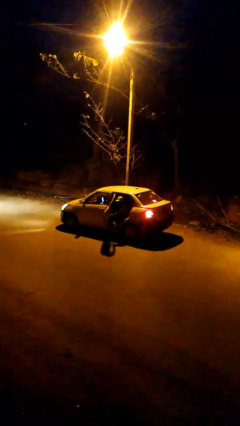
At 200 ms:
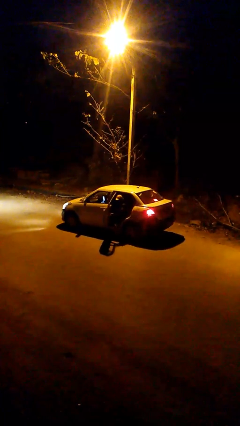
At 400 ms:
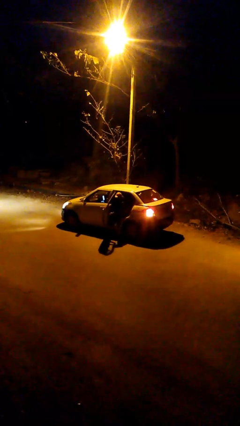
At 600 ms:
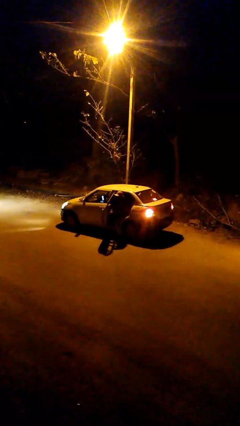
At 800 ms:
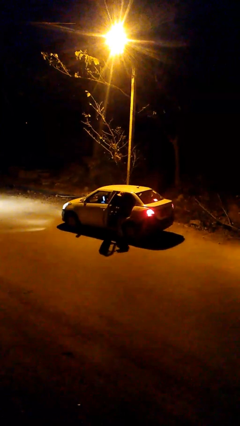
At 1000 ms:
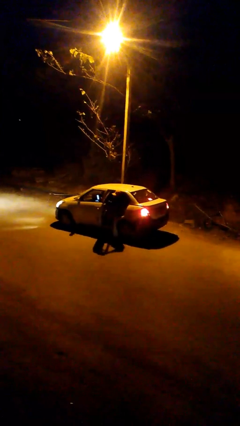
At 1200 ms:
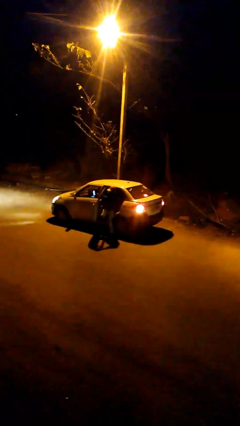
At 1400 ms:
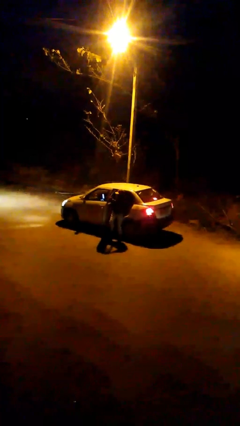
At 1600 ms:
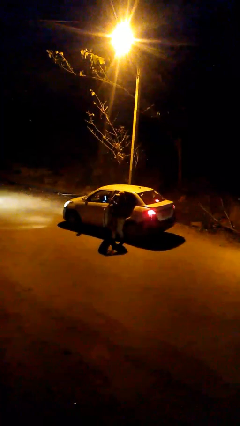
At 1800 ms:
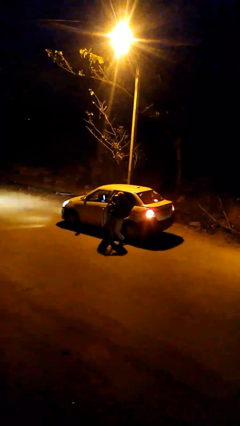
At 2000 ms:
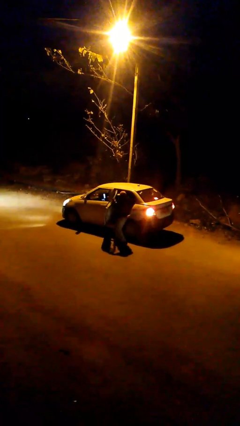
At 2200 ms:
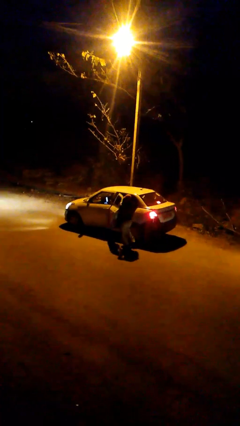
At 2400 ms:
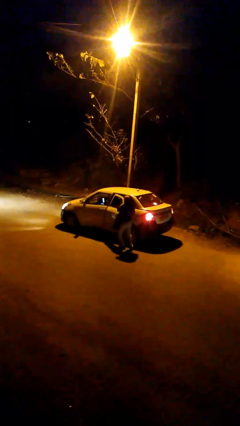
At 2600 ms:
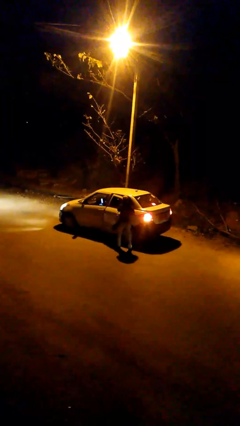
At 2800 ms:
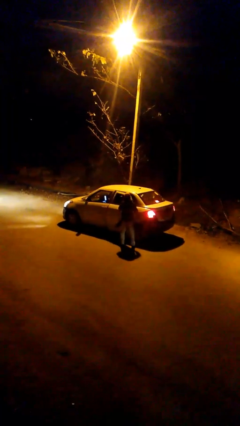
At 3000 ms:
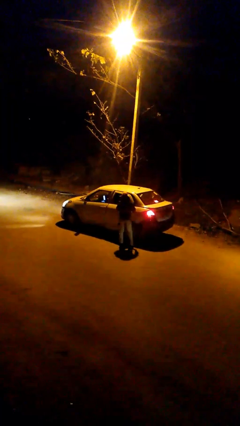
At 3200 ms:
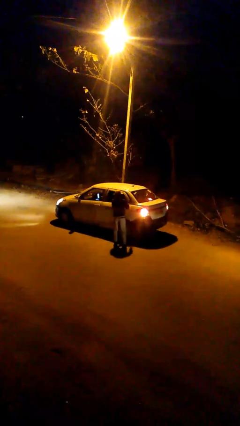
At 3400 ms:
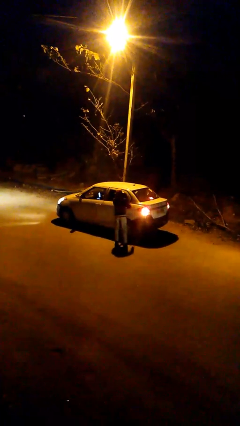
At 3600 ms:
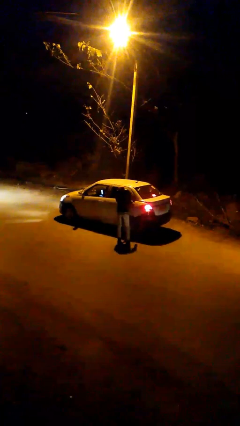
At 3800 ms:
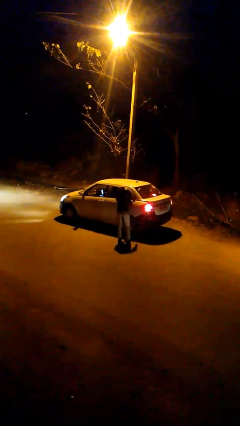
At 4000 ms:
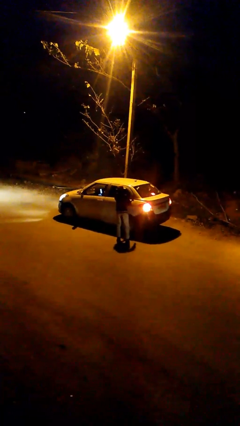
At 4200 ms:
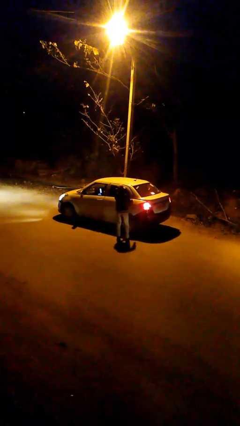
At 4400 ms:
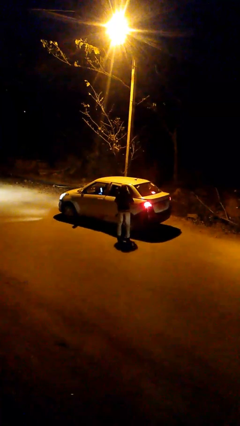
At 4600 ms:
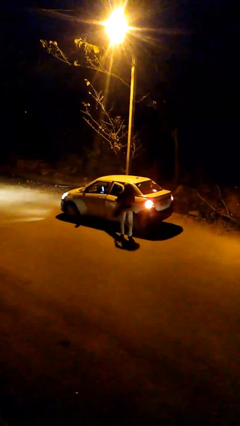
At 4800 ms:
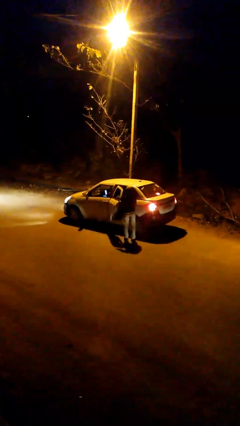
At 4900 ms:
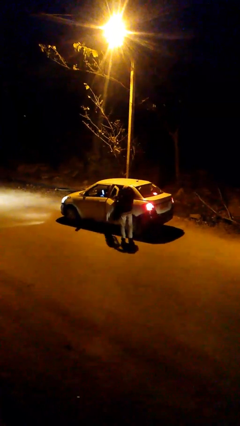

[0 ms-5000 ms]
car drops off person

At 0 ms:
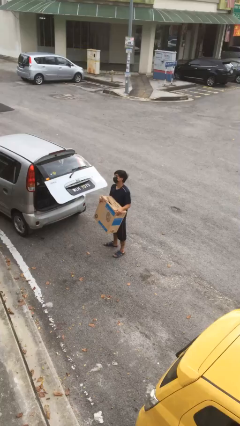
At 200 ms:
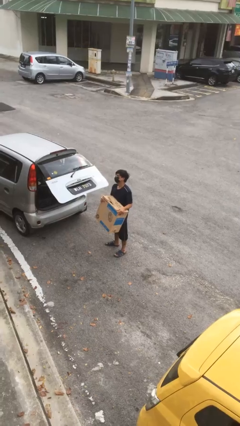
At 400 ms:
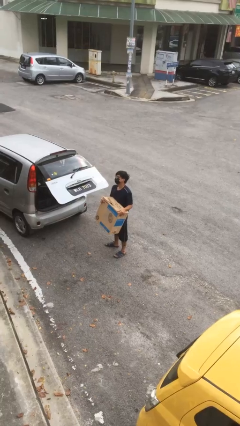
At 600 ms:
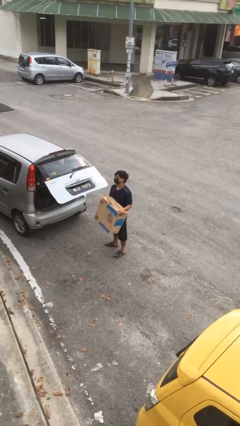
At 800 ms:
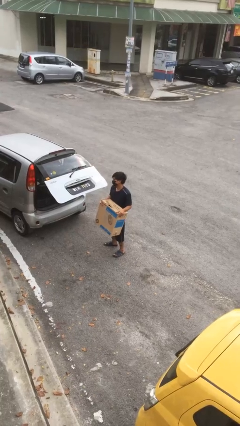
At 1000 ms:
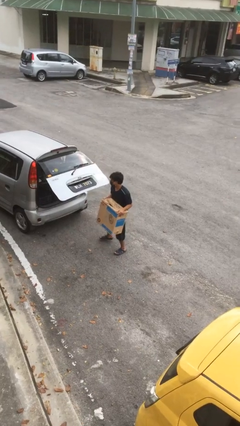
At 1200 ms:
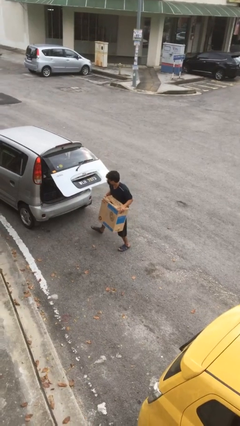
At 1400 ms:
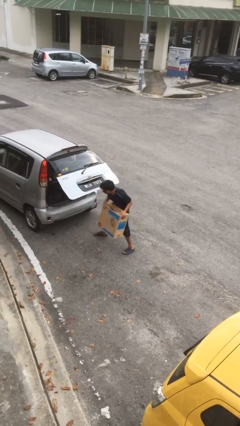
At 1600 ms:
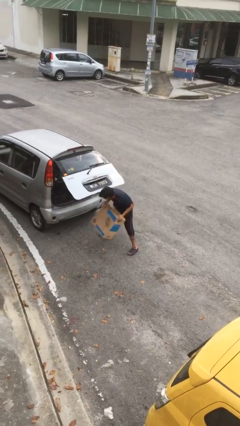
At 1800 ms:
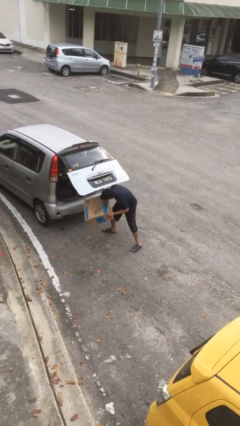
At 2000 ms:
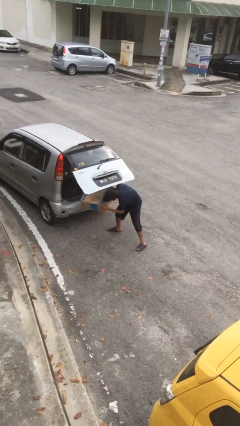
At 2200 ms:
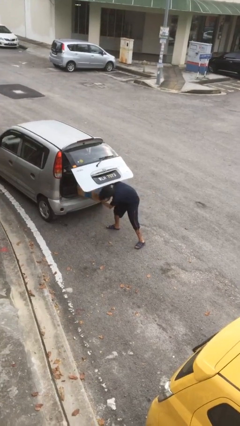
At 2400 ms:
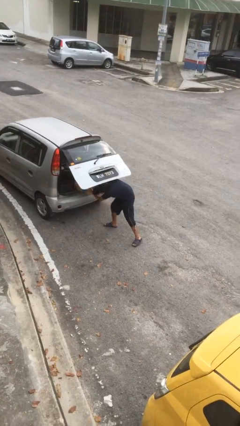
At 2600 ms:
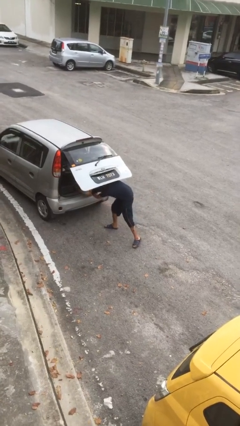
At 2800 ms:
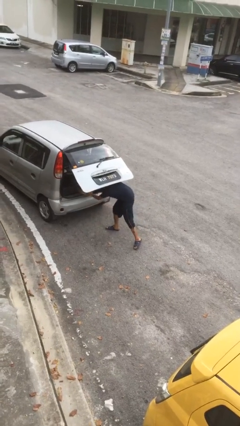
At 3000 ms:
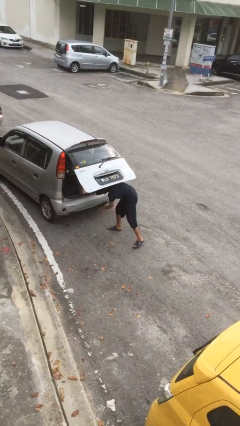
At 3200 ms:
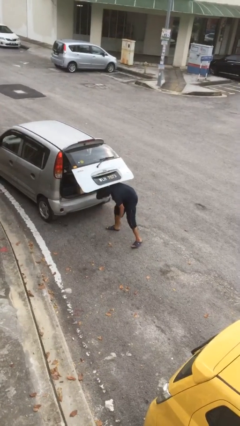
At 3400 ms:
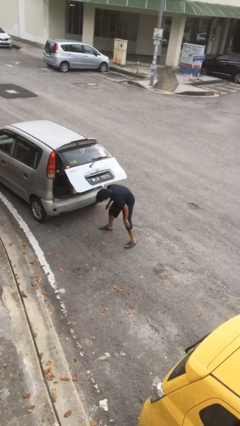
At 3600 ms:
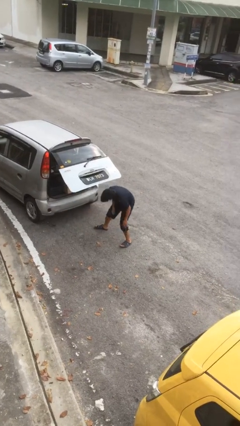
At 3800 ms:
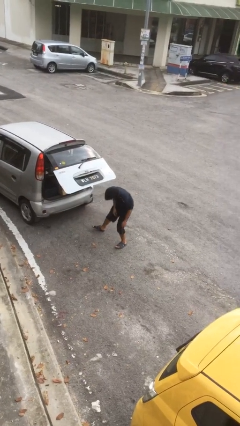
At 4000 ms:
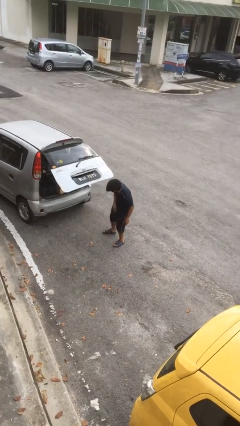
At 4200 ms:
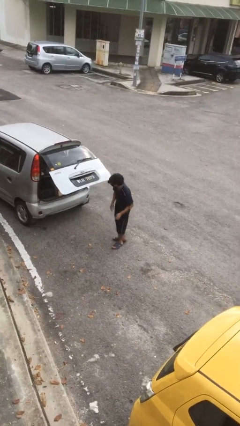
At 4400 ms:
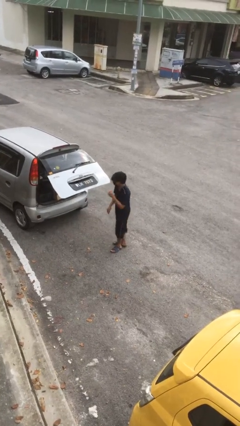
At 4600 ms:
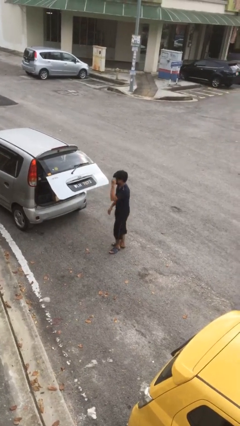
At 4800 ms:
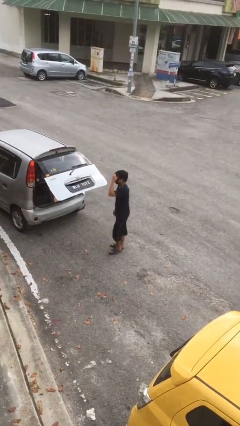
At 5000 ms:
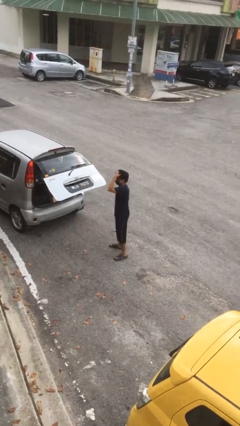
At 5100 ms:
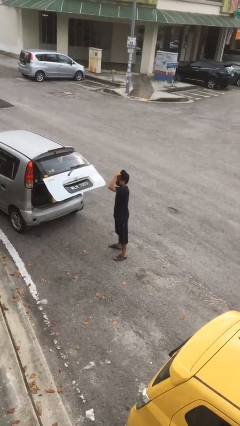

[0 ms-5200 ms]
person loads car

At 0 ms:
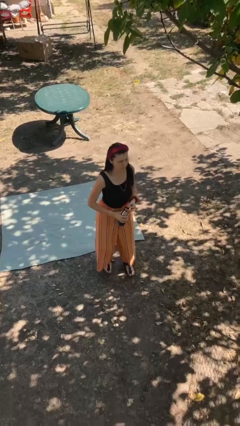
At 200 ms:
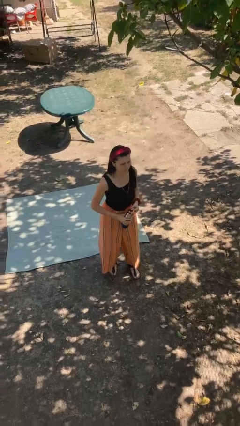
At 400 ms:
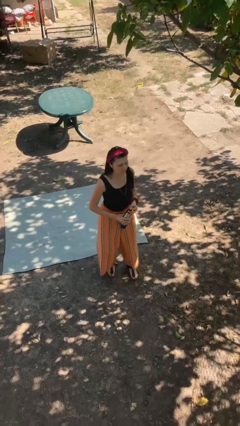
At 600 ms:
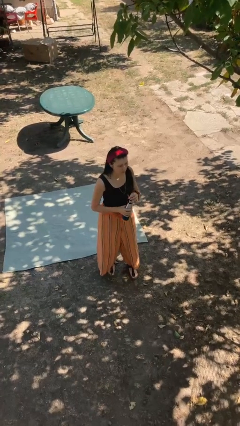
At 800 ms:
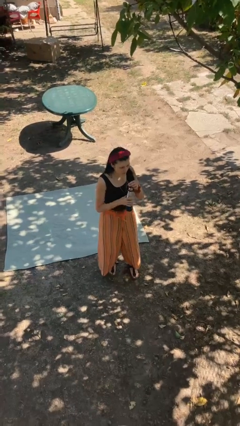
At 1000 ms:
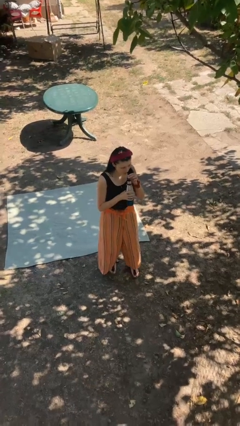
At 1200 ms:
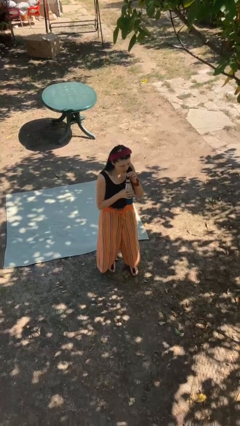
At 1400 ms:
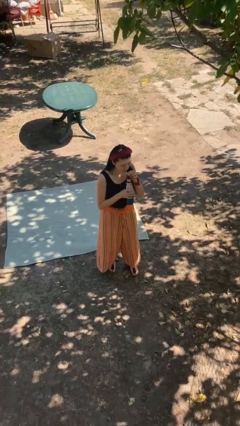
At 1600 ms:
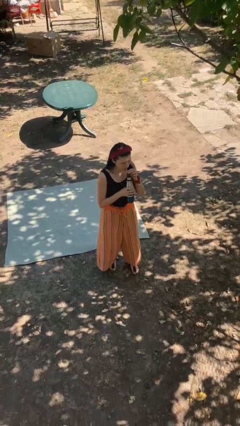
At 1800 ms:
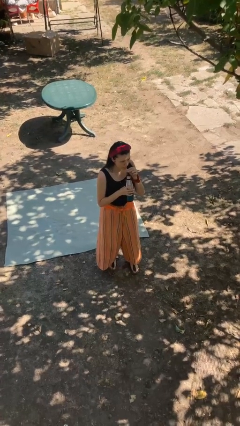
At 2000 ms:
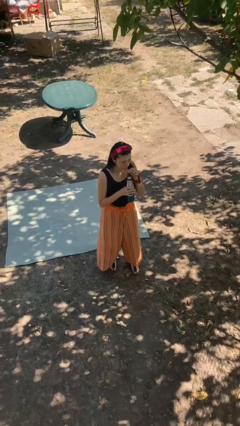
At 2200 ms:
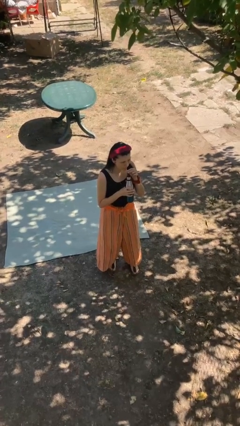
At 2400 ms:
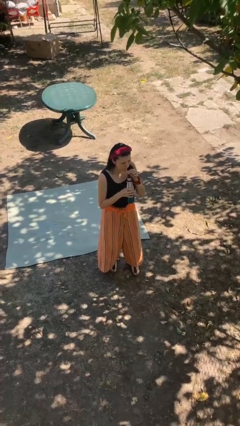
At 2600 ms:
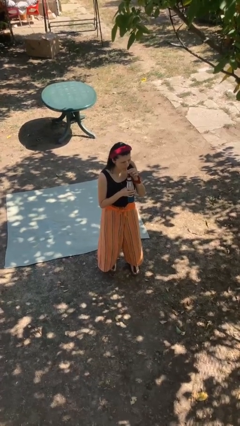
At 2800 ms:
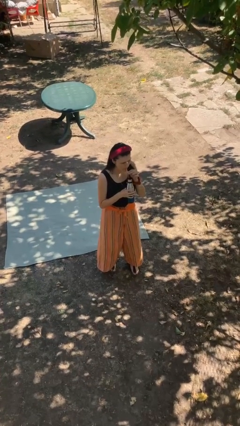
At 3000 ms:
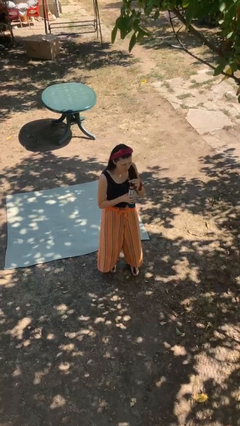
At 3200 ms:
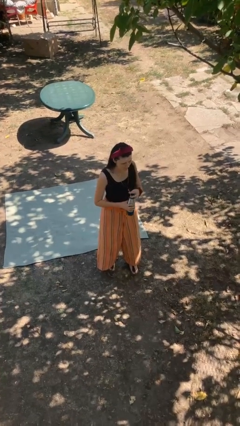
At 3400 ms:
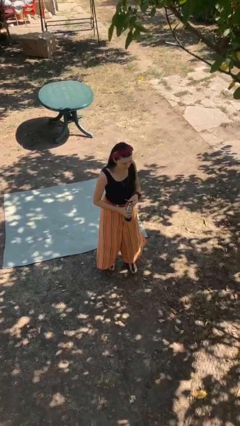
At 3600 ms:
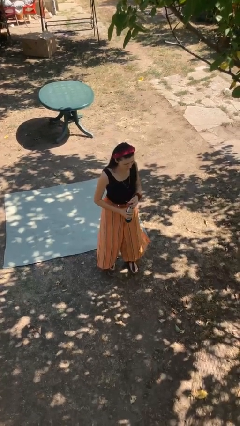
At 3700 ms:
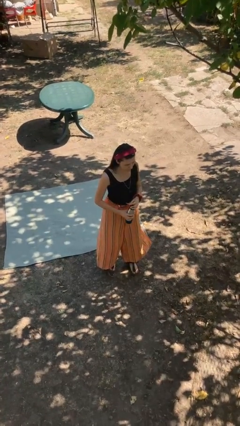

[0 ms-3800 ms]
person drinks from bottle

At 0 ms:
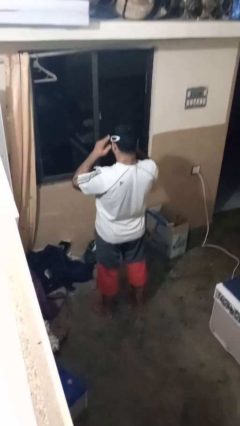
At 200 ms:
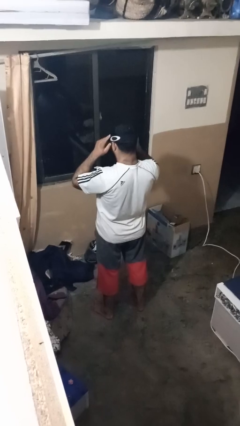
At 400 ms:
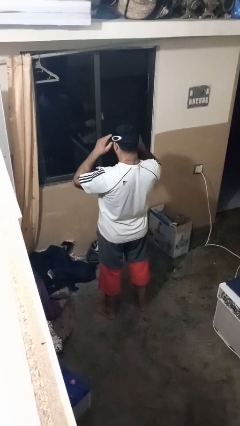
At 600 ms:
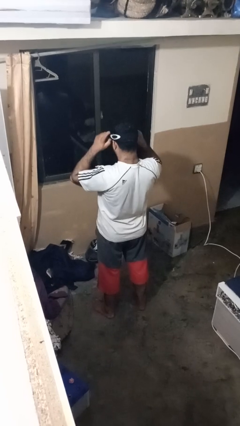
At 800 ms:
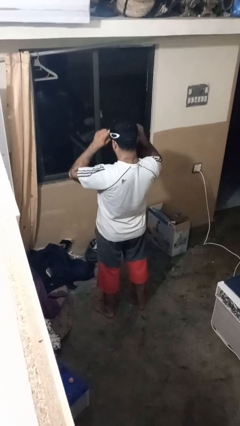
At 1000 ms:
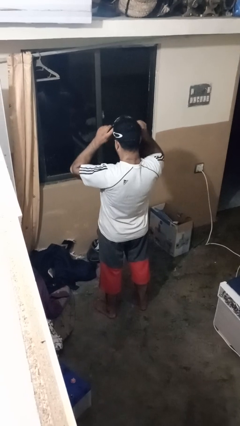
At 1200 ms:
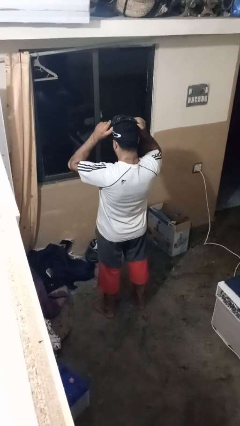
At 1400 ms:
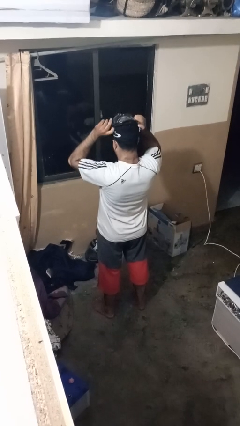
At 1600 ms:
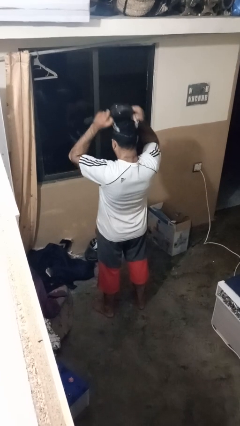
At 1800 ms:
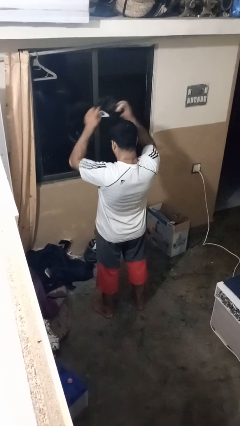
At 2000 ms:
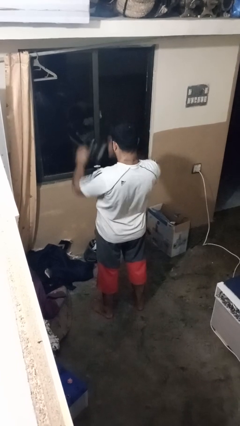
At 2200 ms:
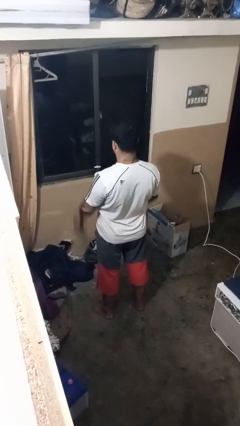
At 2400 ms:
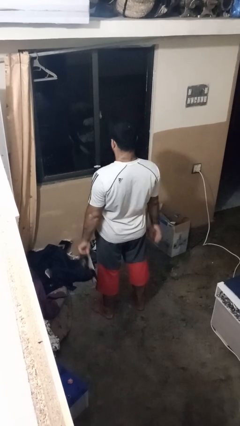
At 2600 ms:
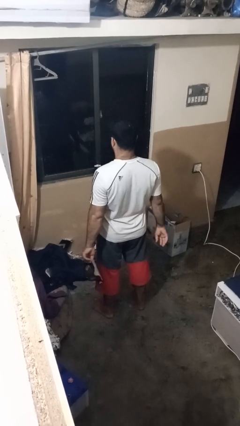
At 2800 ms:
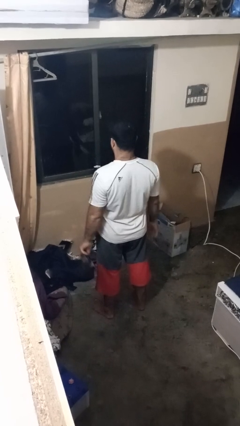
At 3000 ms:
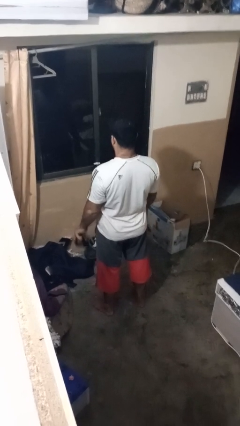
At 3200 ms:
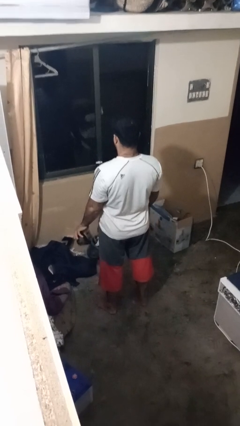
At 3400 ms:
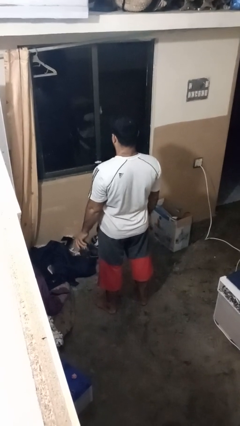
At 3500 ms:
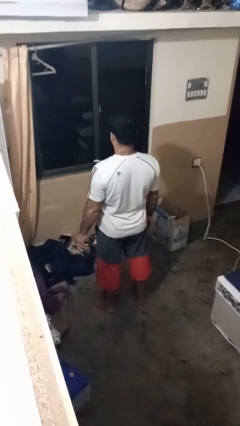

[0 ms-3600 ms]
person takes off sunglasses

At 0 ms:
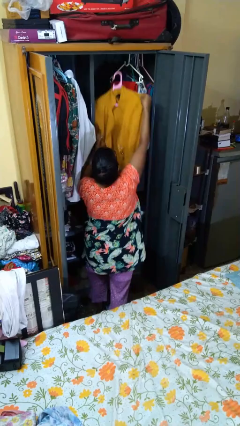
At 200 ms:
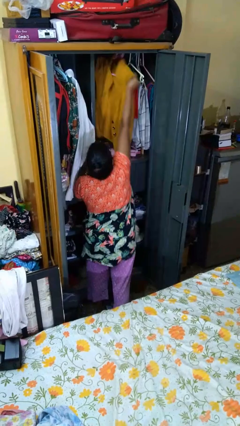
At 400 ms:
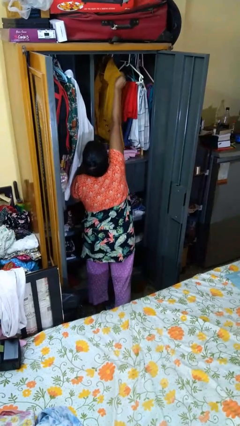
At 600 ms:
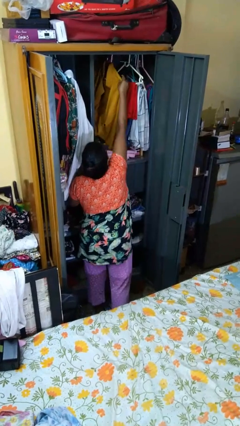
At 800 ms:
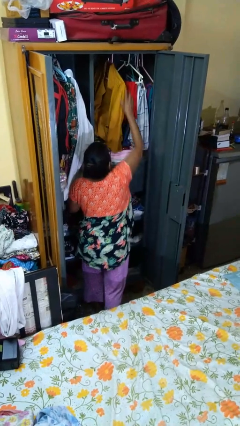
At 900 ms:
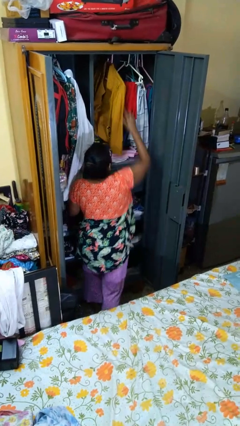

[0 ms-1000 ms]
person puts clothes into closet